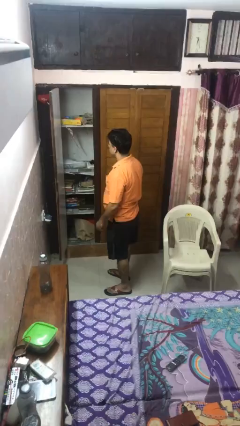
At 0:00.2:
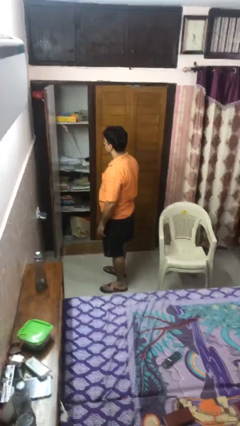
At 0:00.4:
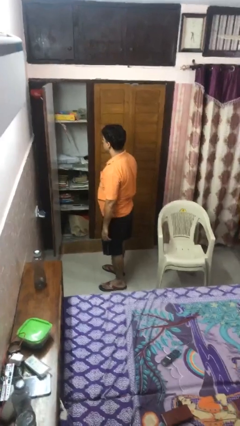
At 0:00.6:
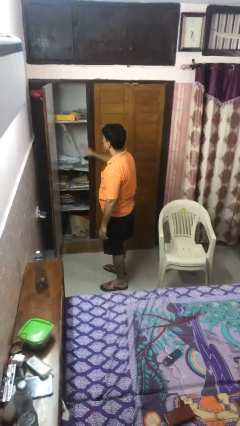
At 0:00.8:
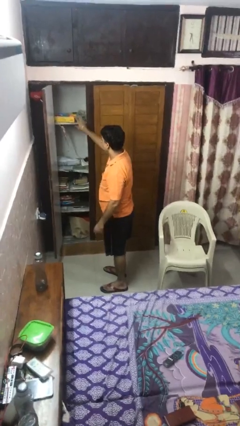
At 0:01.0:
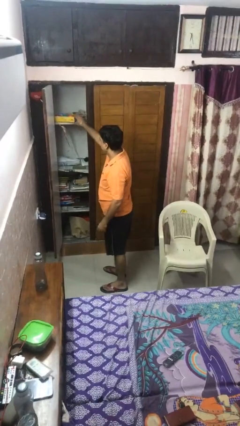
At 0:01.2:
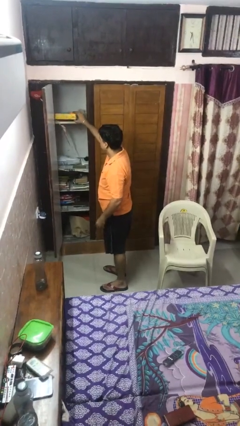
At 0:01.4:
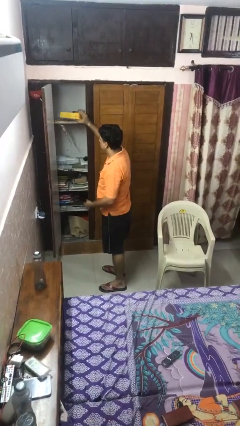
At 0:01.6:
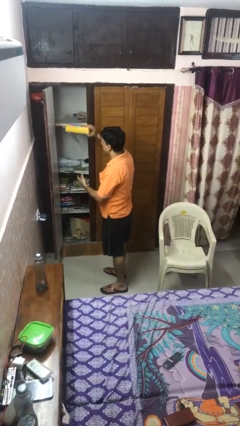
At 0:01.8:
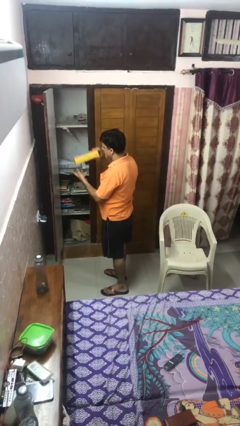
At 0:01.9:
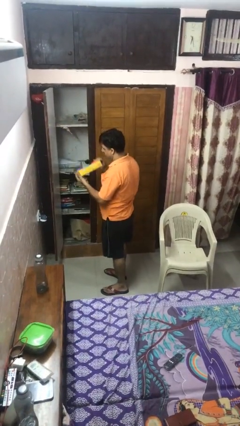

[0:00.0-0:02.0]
person picks up object from shelf

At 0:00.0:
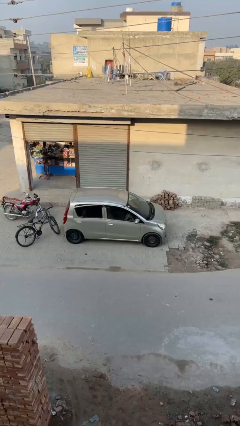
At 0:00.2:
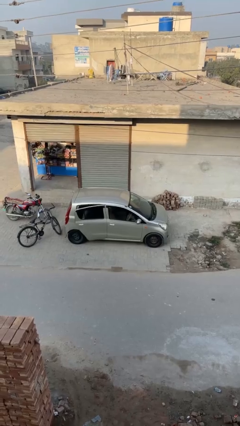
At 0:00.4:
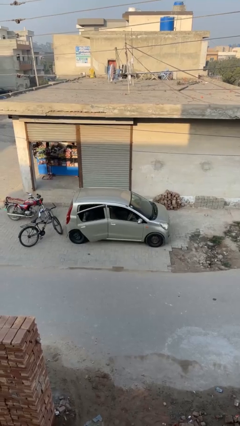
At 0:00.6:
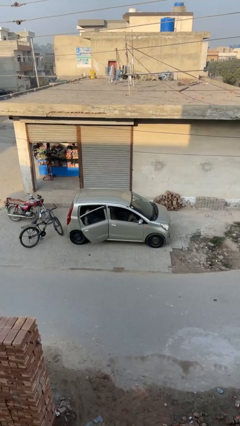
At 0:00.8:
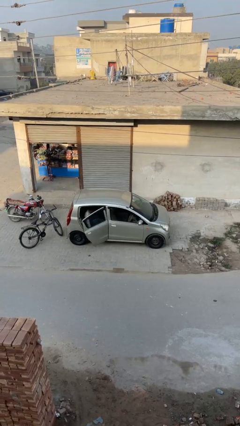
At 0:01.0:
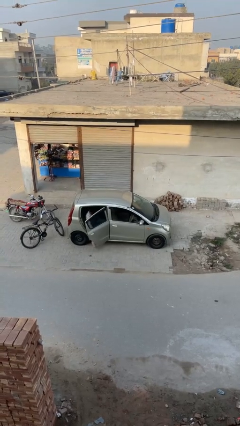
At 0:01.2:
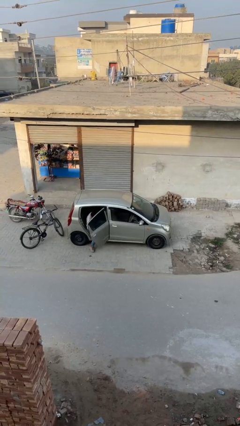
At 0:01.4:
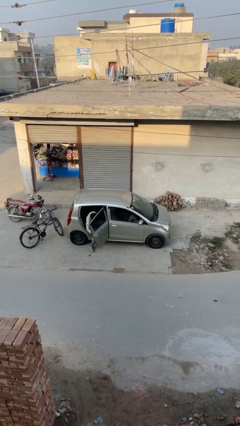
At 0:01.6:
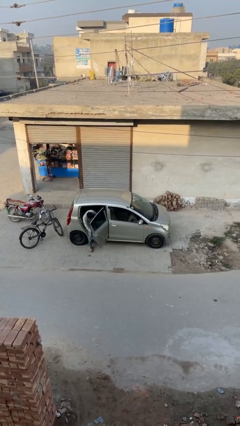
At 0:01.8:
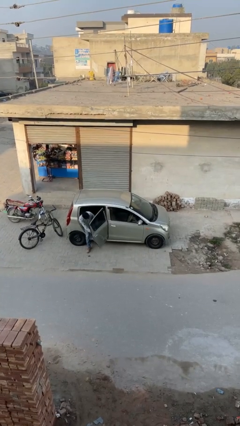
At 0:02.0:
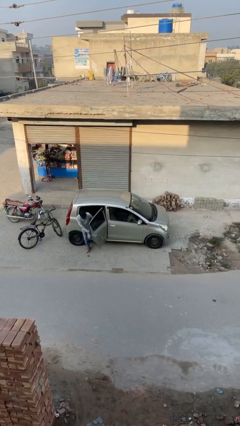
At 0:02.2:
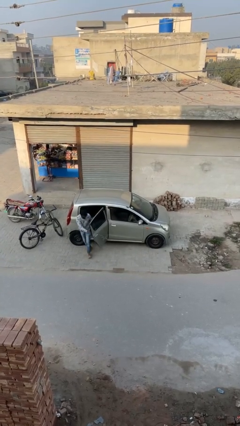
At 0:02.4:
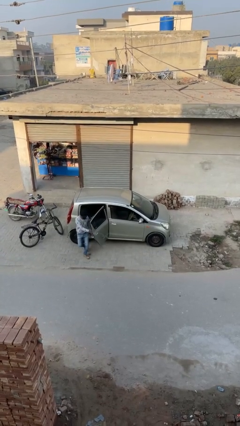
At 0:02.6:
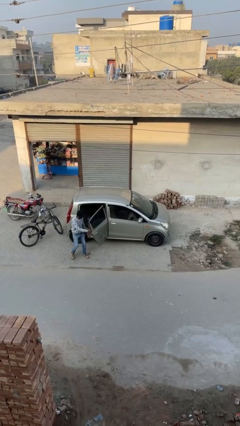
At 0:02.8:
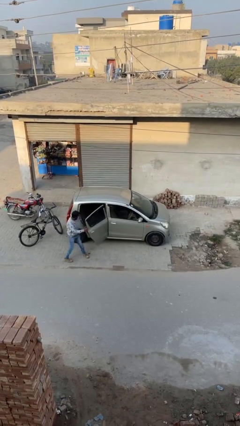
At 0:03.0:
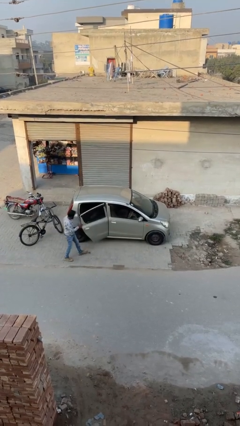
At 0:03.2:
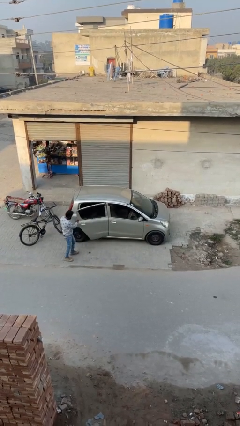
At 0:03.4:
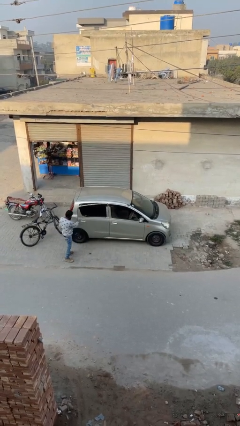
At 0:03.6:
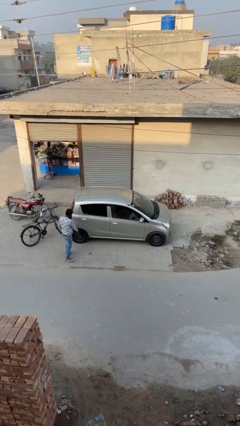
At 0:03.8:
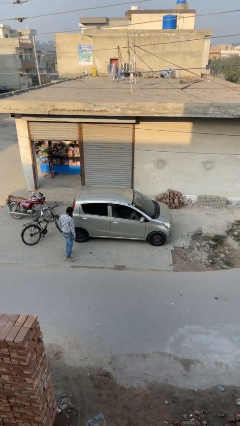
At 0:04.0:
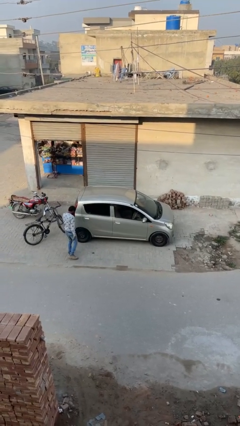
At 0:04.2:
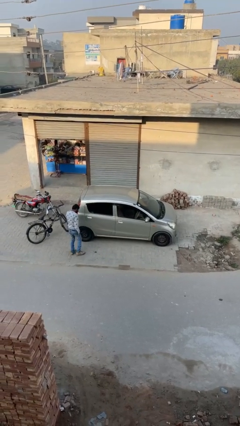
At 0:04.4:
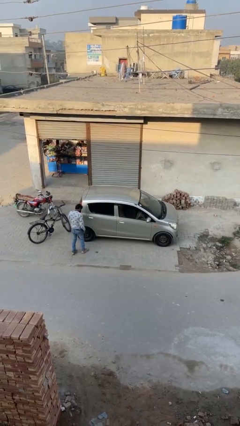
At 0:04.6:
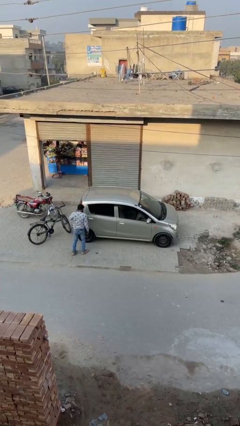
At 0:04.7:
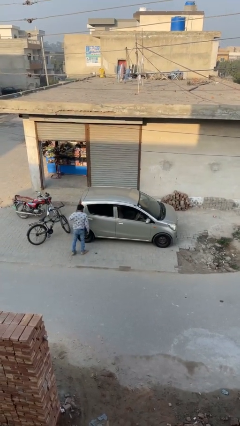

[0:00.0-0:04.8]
car drops off person

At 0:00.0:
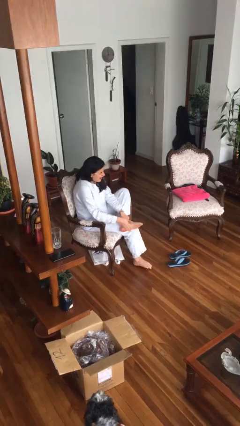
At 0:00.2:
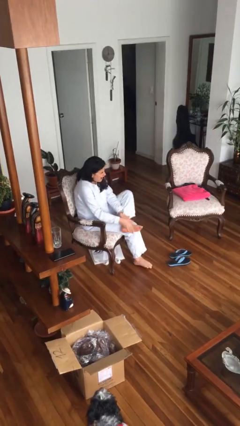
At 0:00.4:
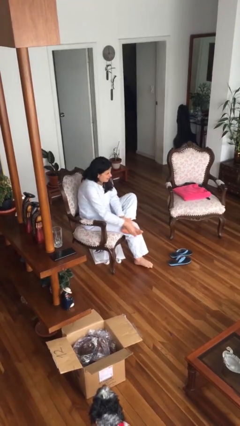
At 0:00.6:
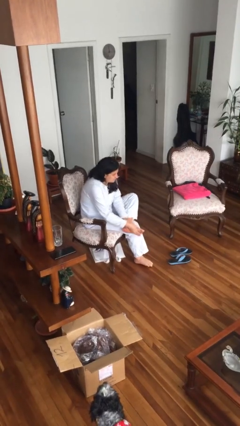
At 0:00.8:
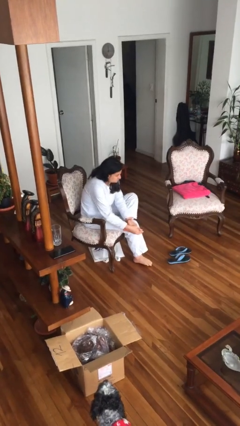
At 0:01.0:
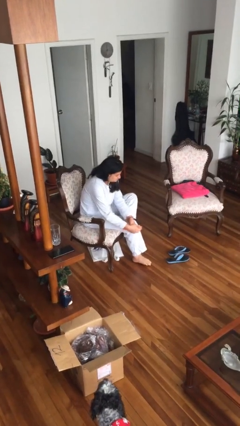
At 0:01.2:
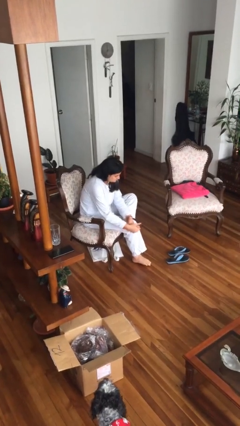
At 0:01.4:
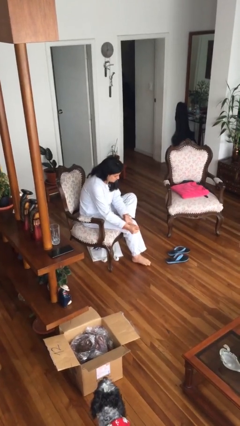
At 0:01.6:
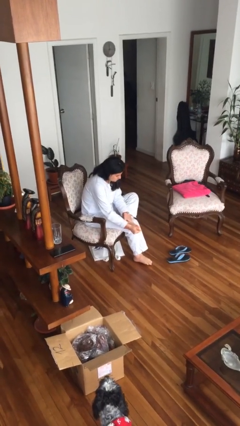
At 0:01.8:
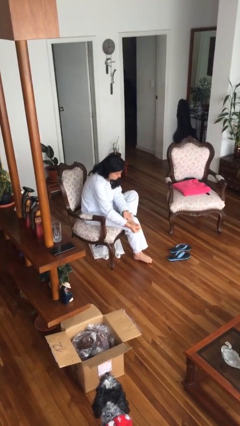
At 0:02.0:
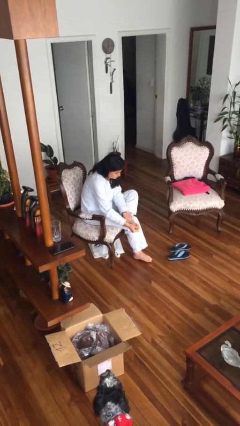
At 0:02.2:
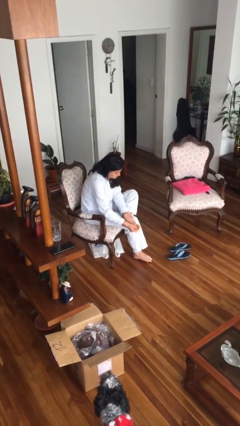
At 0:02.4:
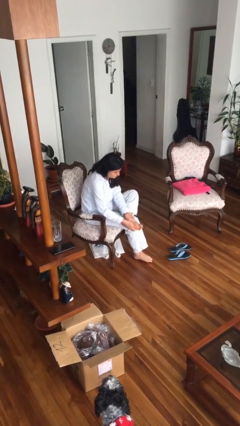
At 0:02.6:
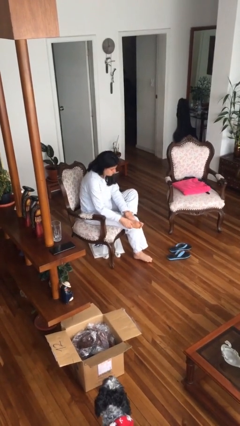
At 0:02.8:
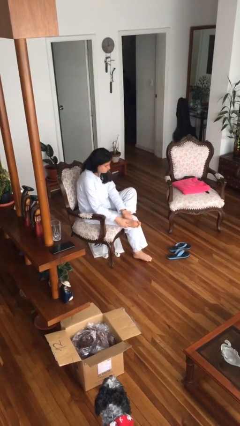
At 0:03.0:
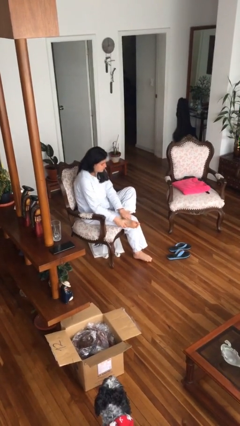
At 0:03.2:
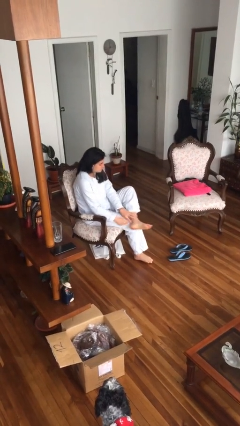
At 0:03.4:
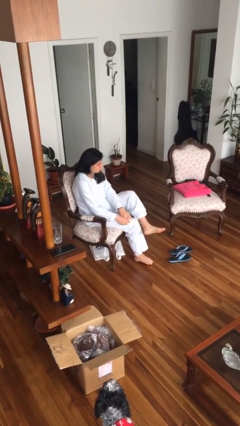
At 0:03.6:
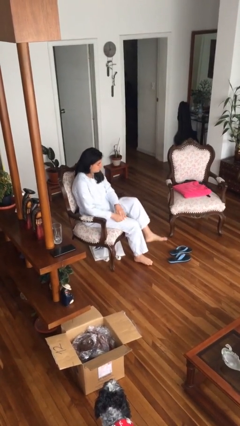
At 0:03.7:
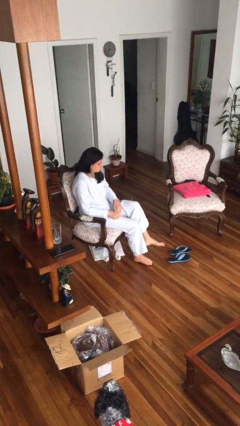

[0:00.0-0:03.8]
person rubs foot

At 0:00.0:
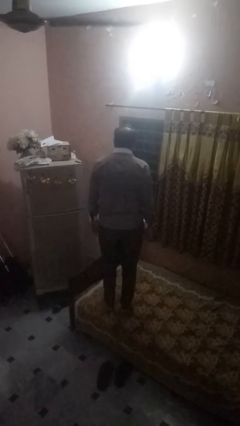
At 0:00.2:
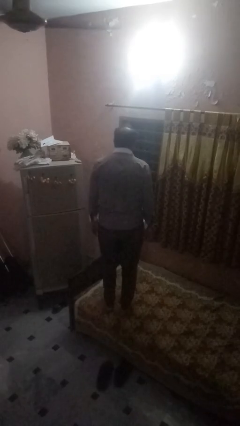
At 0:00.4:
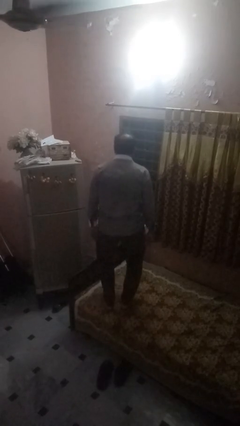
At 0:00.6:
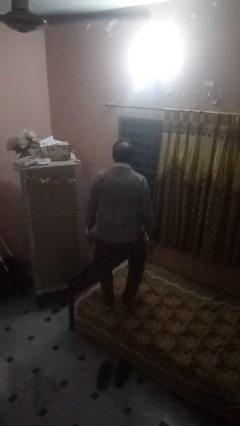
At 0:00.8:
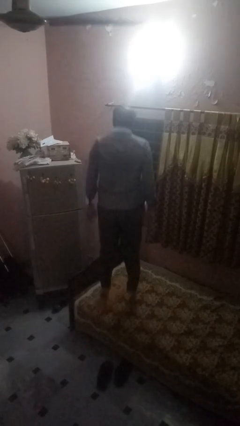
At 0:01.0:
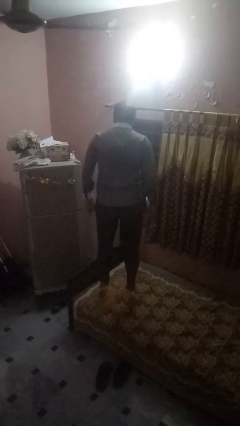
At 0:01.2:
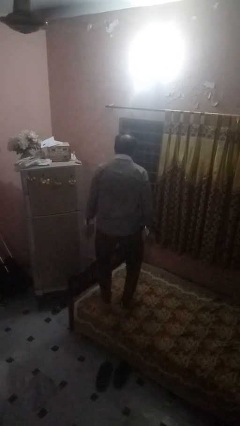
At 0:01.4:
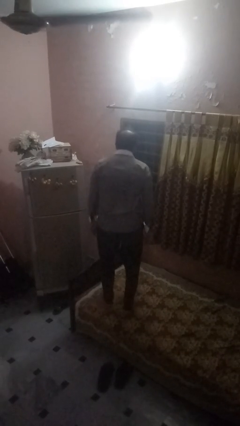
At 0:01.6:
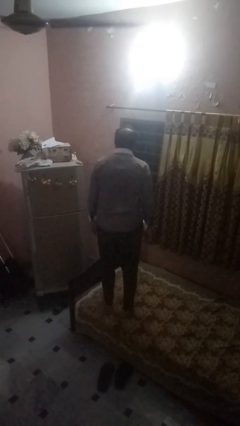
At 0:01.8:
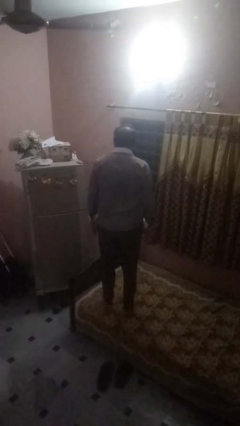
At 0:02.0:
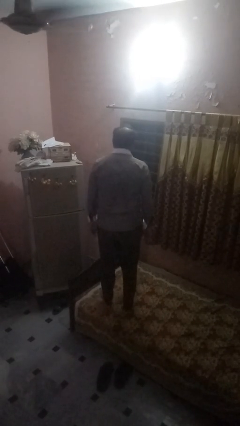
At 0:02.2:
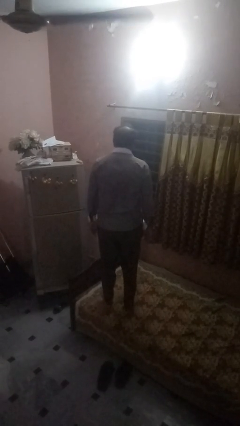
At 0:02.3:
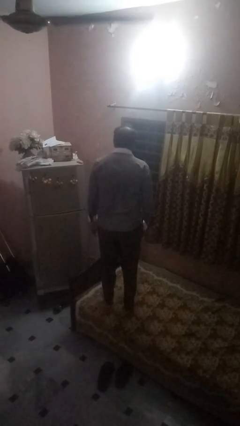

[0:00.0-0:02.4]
person jumps on bed

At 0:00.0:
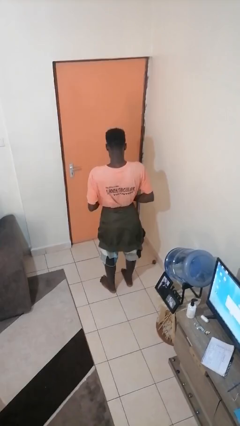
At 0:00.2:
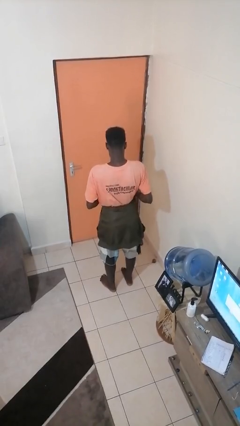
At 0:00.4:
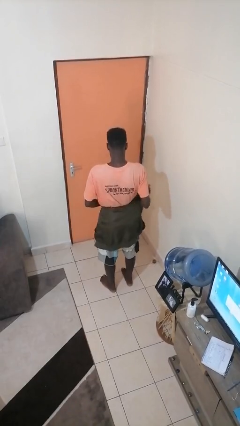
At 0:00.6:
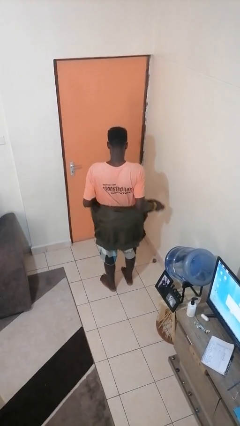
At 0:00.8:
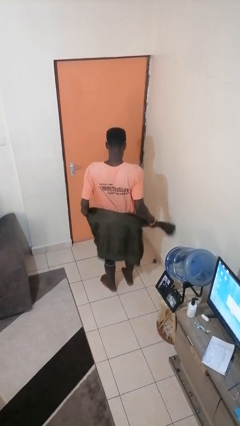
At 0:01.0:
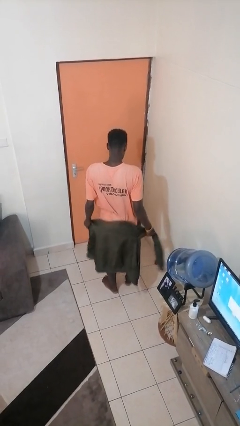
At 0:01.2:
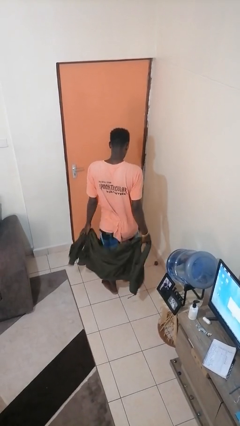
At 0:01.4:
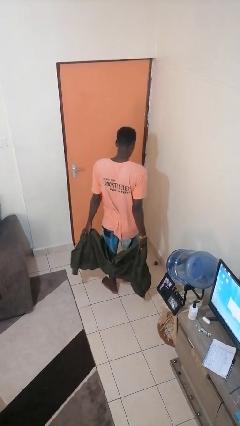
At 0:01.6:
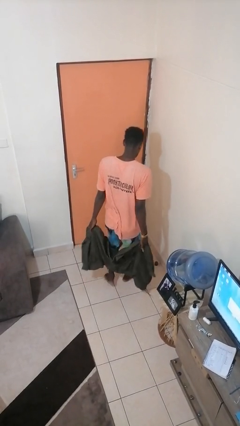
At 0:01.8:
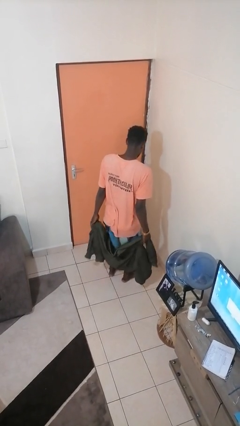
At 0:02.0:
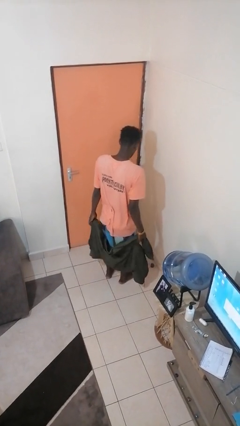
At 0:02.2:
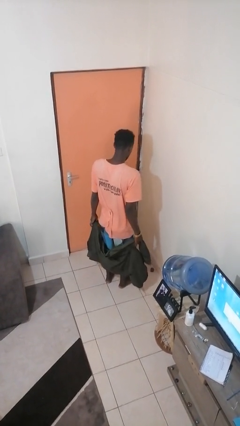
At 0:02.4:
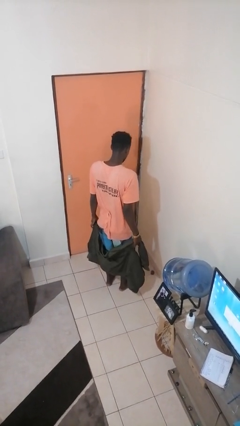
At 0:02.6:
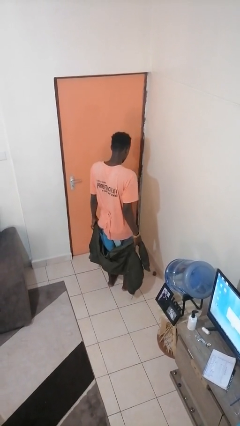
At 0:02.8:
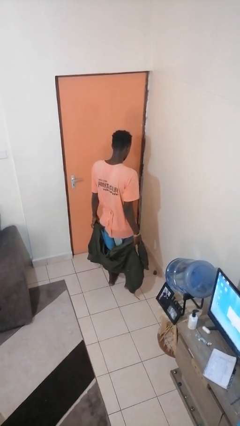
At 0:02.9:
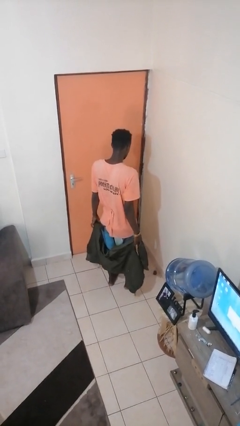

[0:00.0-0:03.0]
person unties jacket around waist

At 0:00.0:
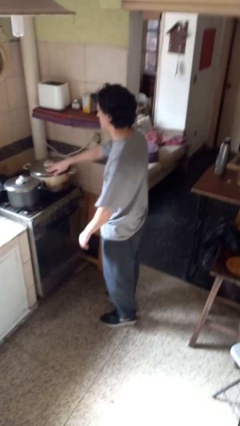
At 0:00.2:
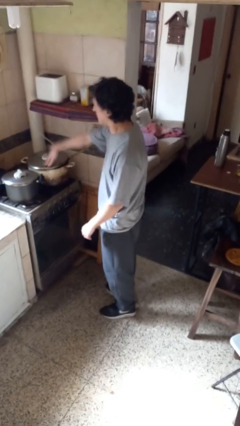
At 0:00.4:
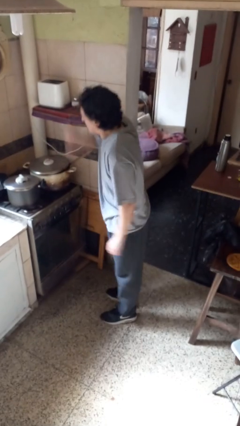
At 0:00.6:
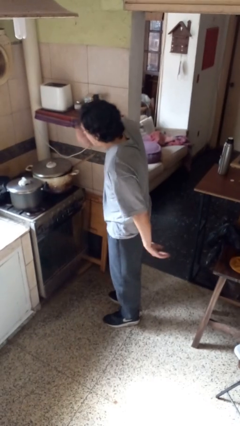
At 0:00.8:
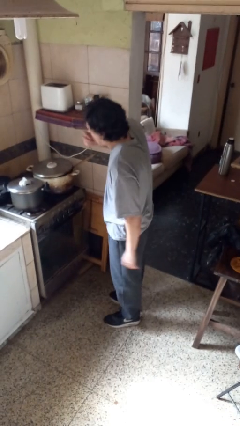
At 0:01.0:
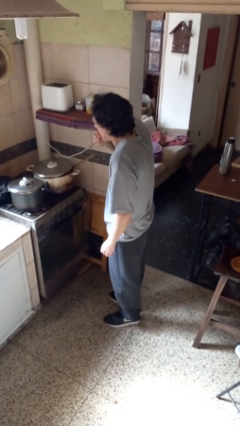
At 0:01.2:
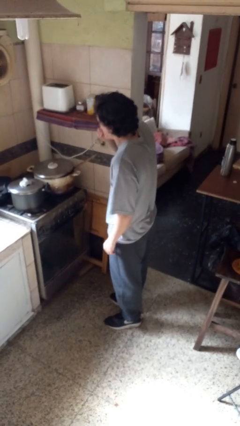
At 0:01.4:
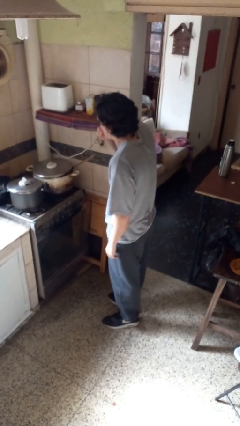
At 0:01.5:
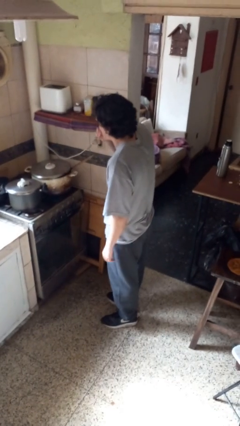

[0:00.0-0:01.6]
person burns hand
